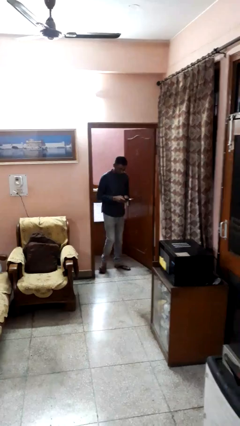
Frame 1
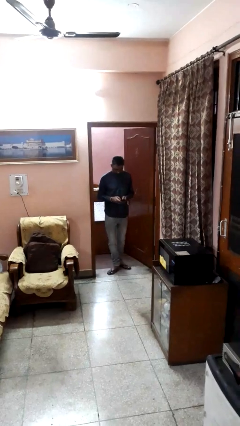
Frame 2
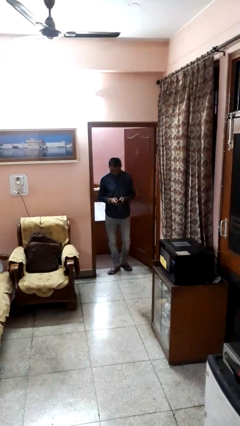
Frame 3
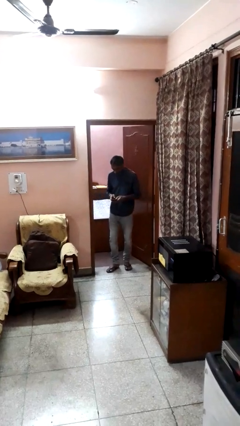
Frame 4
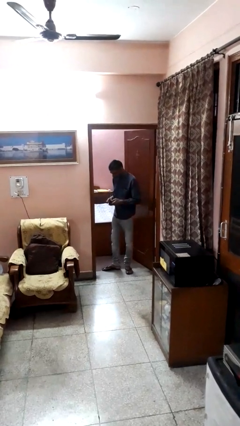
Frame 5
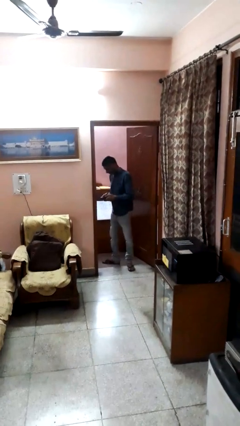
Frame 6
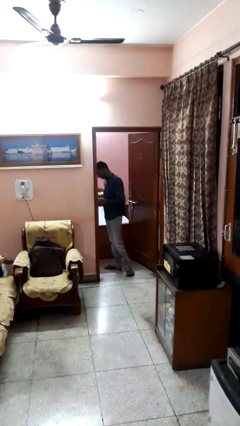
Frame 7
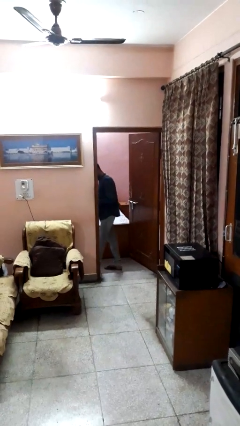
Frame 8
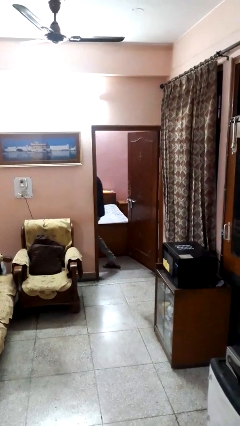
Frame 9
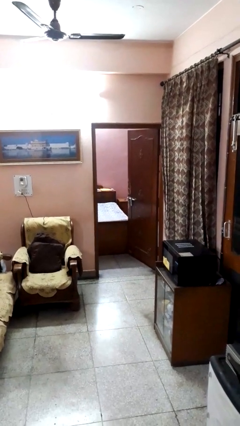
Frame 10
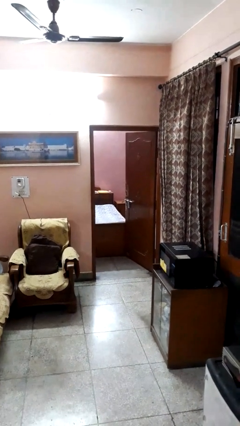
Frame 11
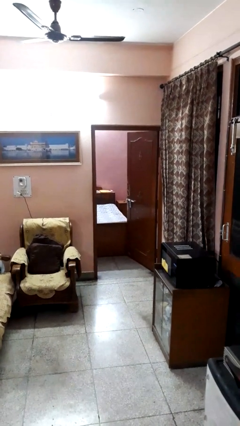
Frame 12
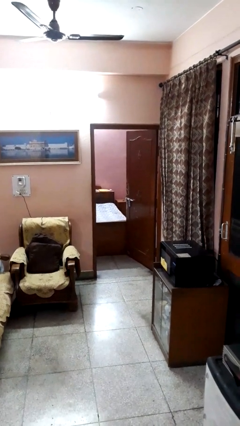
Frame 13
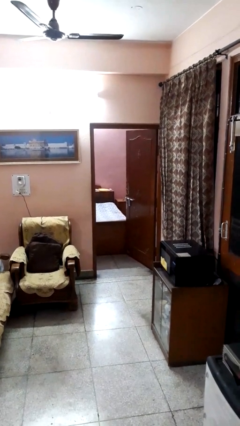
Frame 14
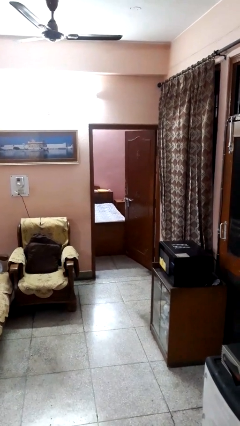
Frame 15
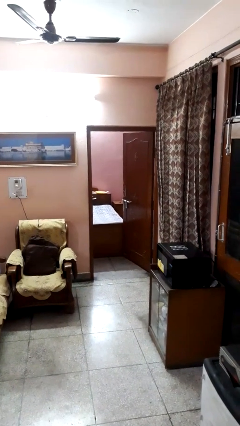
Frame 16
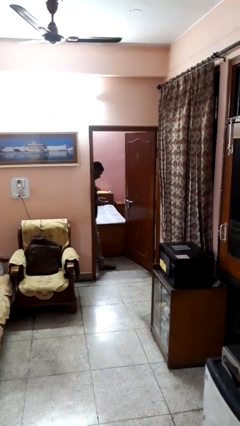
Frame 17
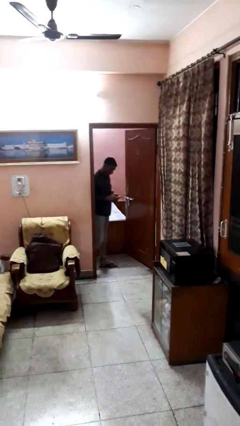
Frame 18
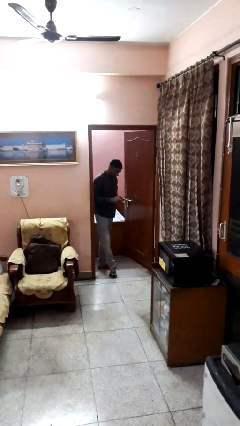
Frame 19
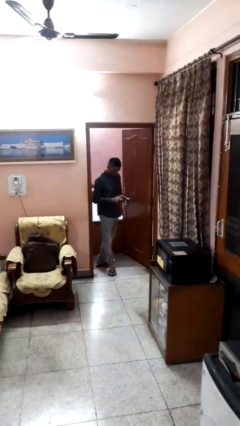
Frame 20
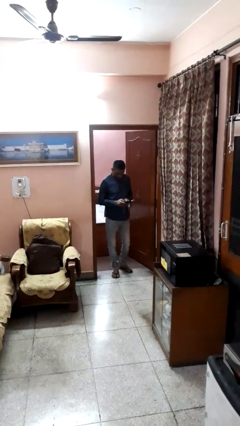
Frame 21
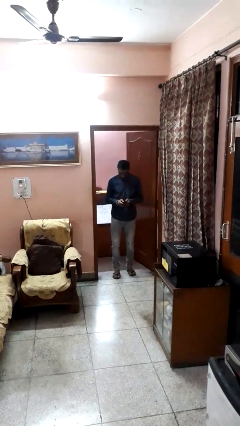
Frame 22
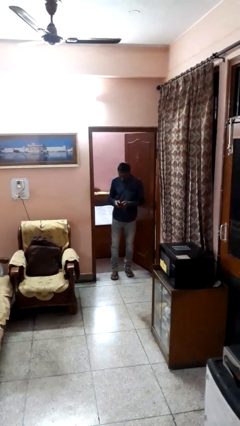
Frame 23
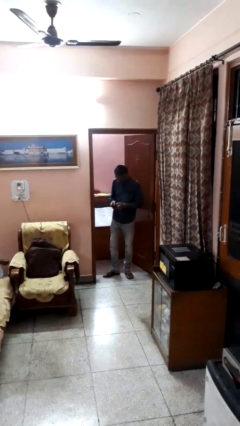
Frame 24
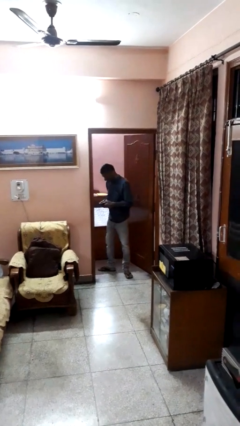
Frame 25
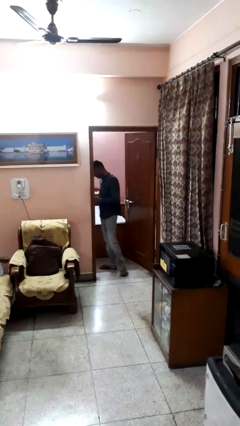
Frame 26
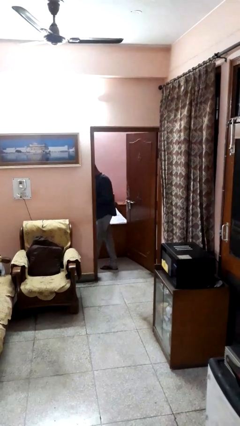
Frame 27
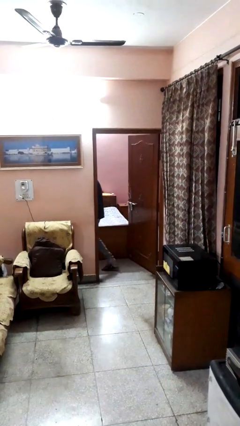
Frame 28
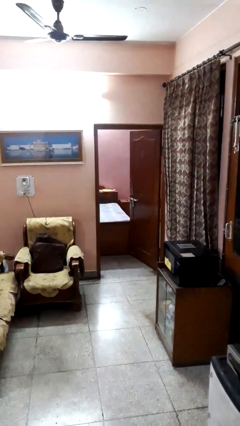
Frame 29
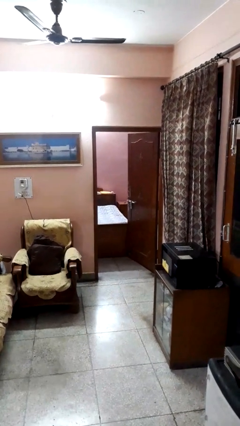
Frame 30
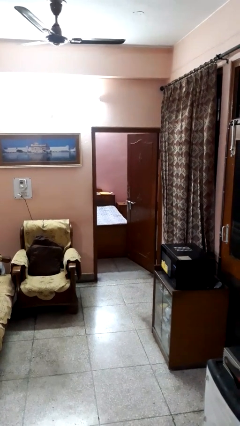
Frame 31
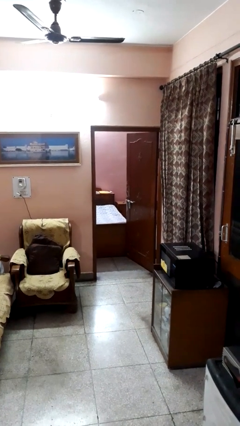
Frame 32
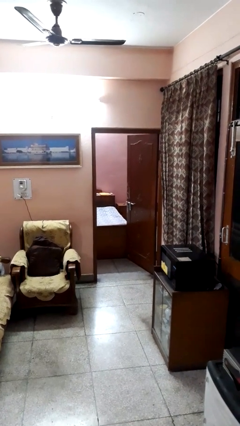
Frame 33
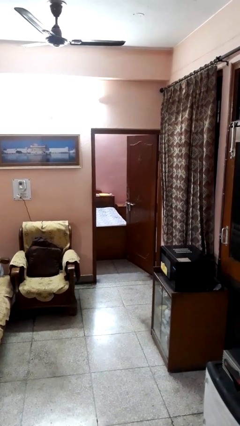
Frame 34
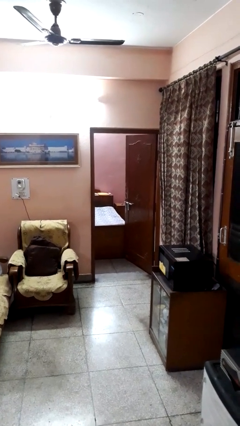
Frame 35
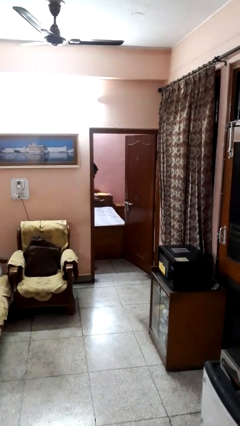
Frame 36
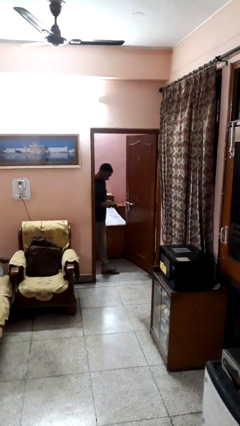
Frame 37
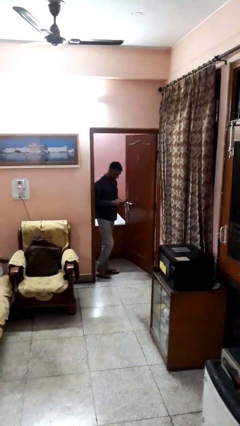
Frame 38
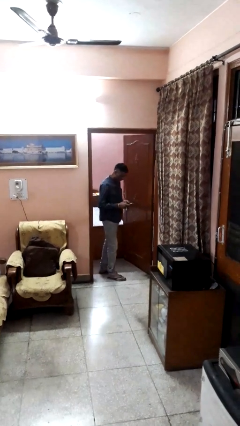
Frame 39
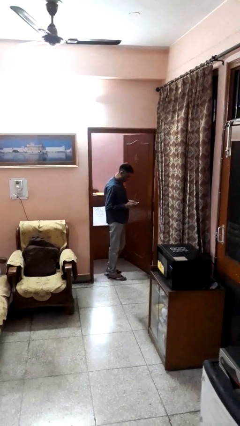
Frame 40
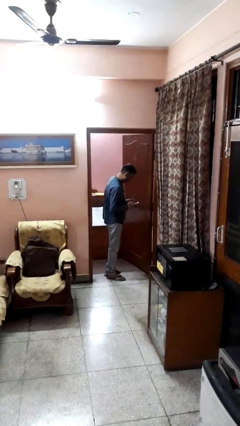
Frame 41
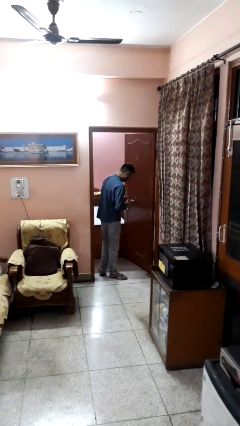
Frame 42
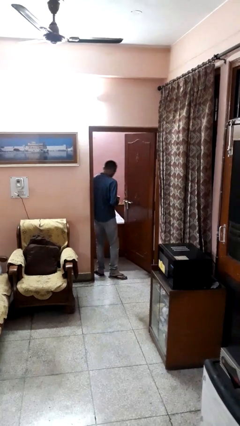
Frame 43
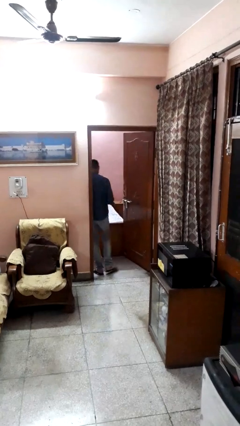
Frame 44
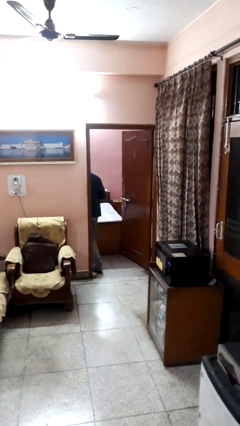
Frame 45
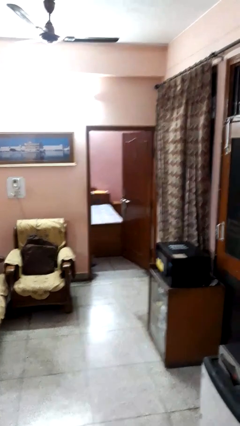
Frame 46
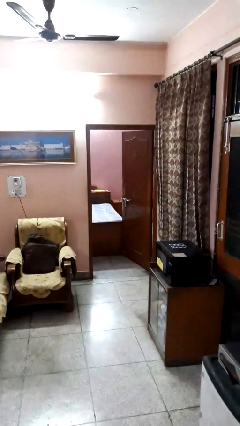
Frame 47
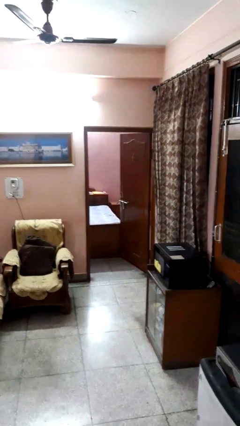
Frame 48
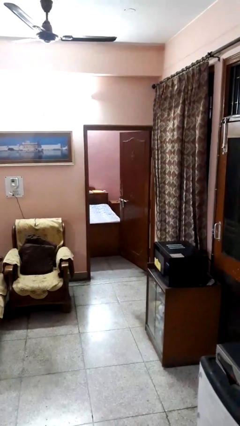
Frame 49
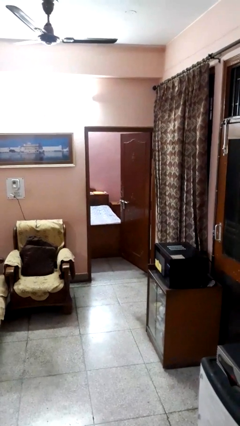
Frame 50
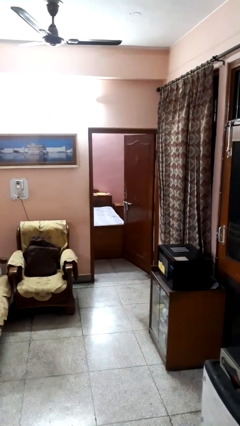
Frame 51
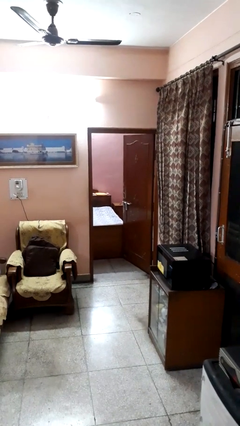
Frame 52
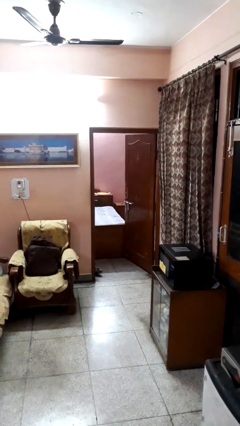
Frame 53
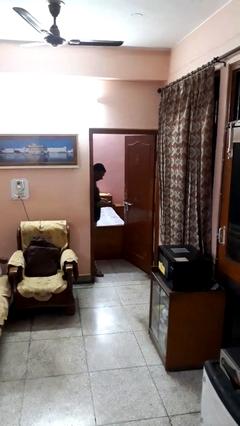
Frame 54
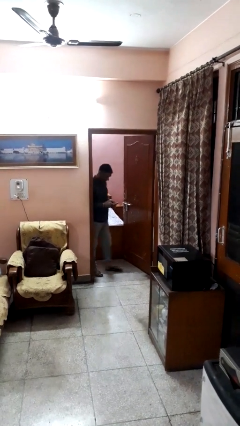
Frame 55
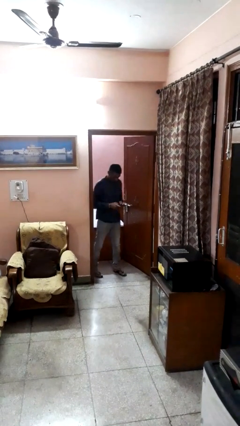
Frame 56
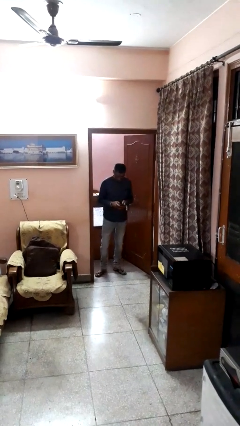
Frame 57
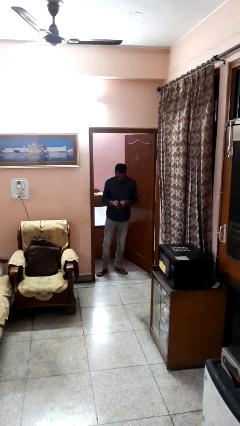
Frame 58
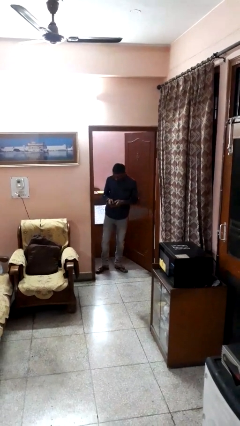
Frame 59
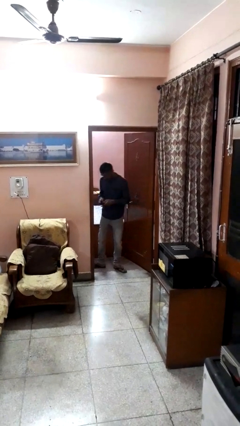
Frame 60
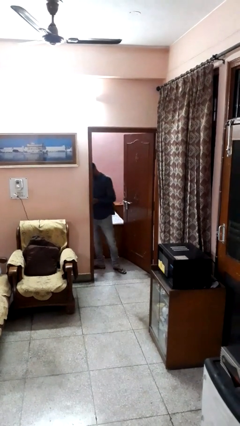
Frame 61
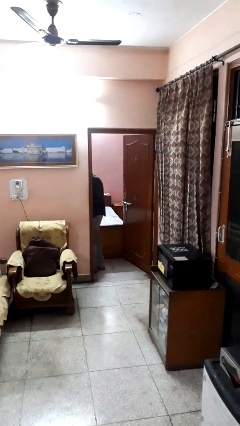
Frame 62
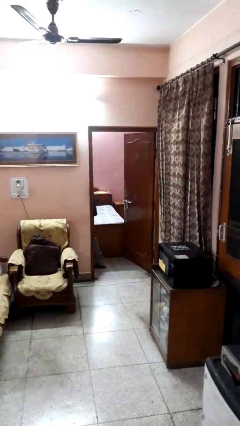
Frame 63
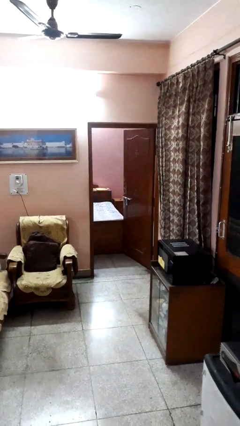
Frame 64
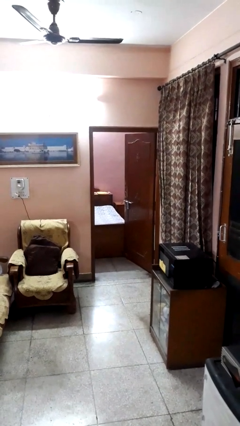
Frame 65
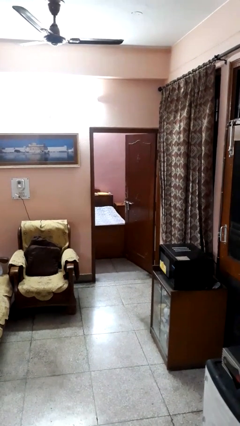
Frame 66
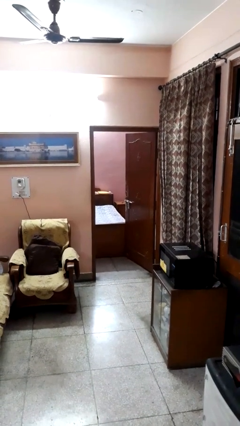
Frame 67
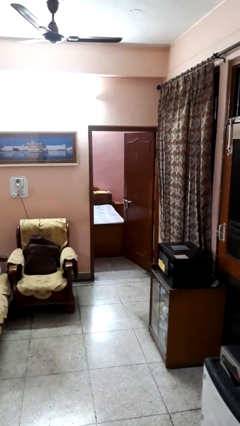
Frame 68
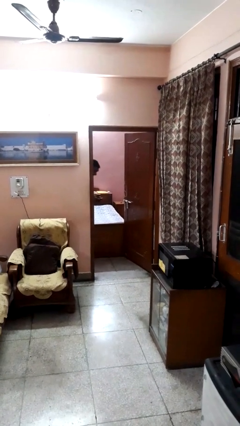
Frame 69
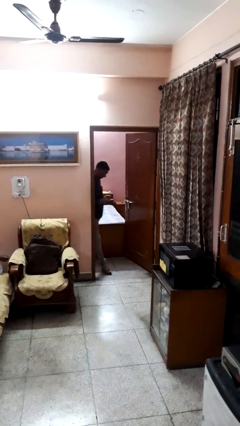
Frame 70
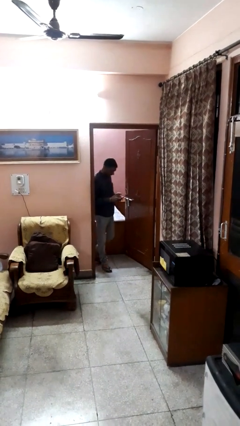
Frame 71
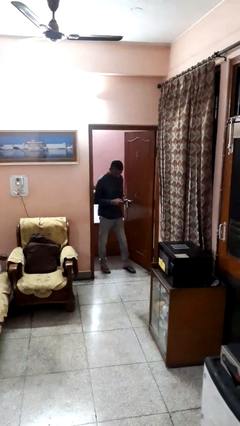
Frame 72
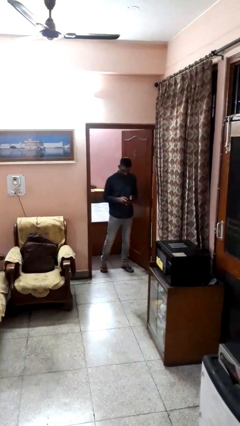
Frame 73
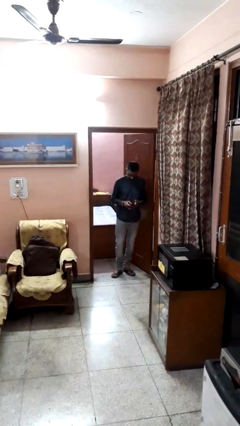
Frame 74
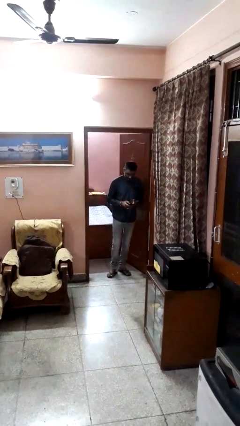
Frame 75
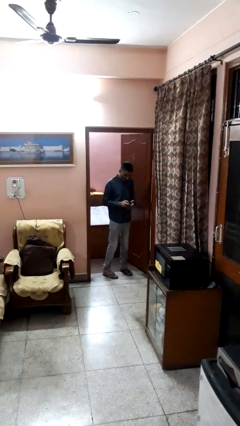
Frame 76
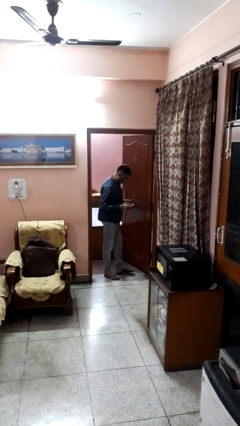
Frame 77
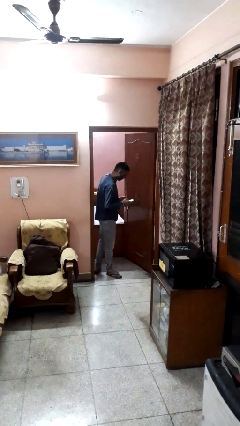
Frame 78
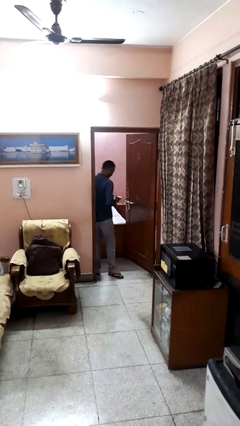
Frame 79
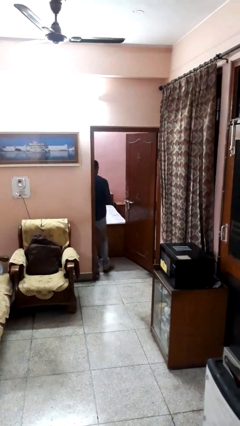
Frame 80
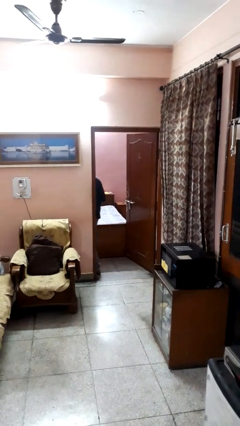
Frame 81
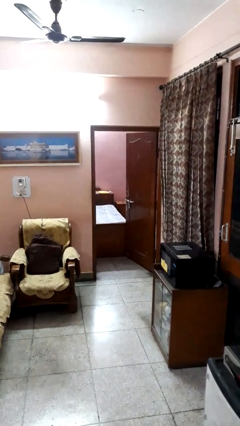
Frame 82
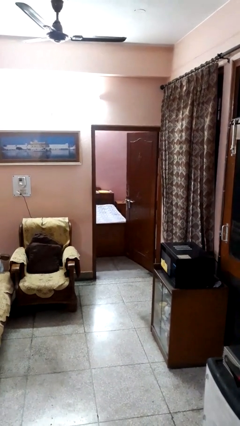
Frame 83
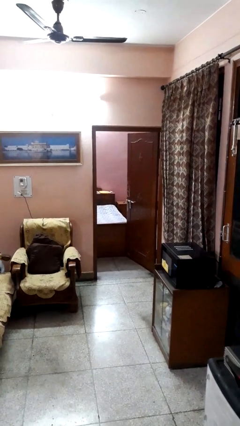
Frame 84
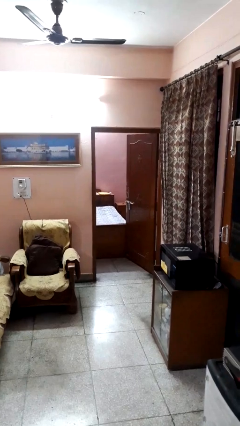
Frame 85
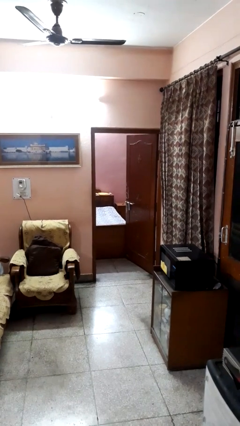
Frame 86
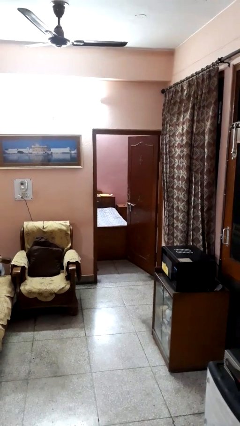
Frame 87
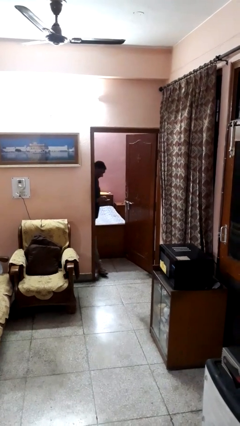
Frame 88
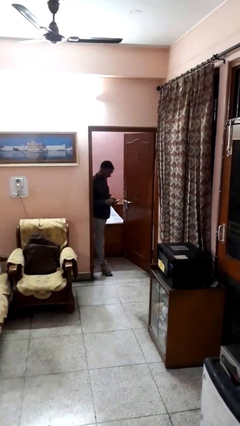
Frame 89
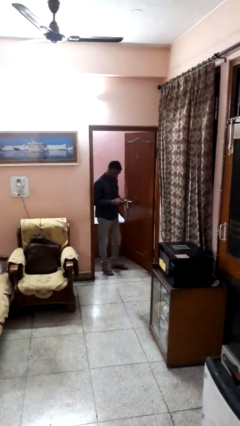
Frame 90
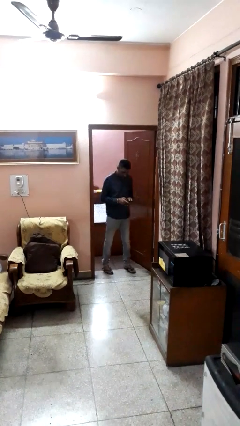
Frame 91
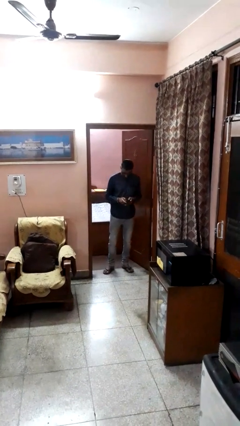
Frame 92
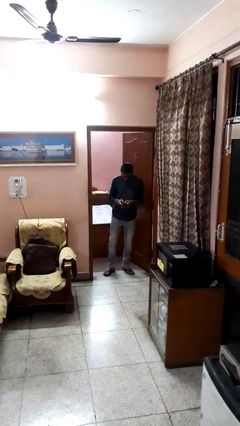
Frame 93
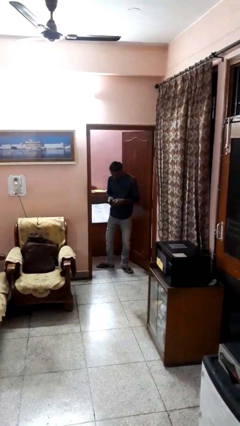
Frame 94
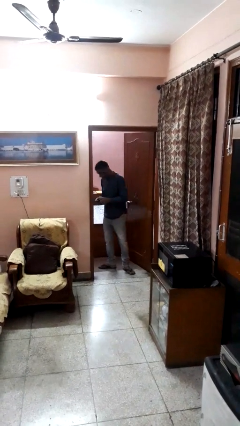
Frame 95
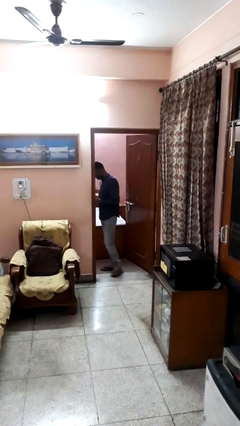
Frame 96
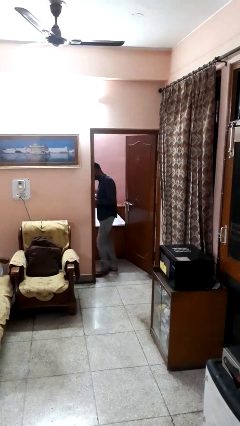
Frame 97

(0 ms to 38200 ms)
person texts on phone
